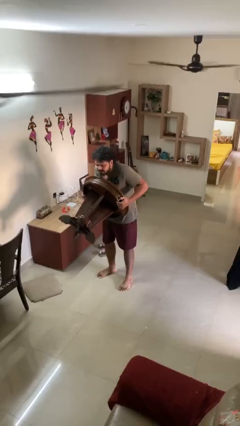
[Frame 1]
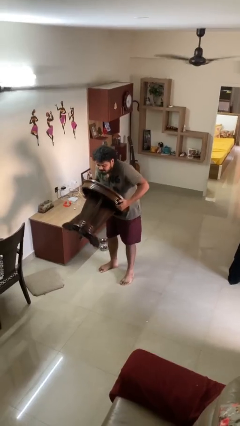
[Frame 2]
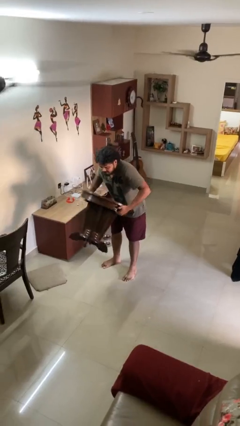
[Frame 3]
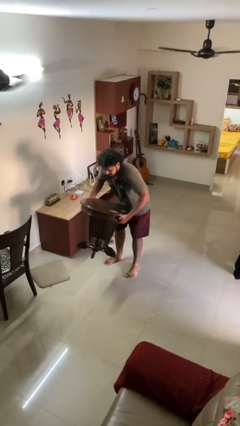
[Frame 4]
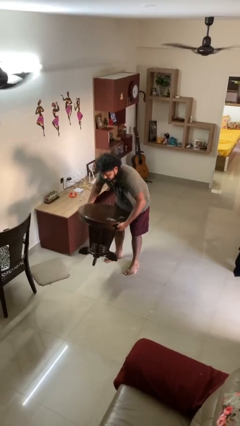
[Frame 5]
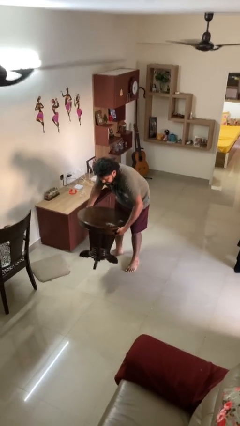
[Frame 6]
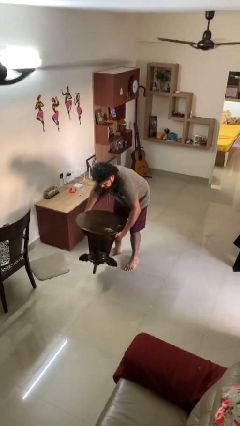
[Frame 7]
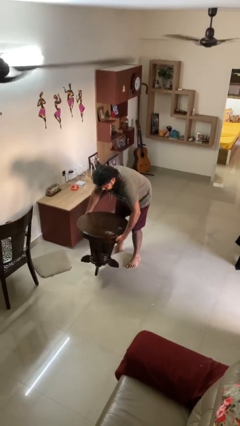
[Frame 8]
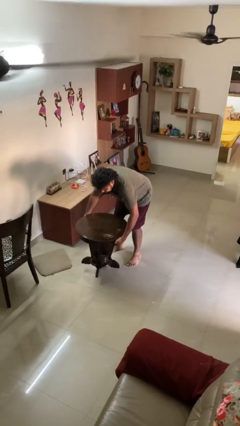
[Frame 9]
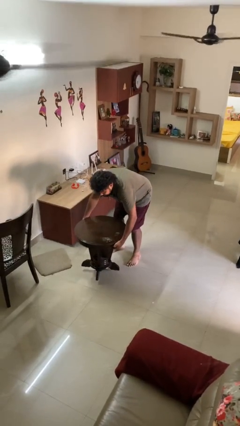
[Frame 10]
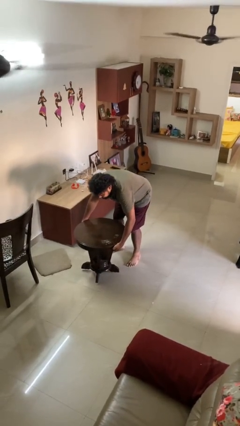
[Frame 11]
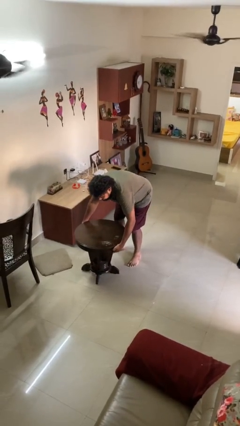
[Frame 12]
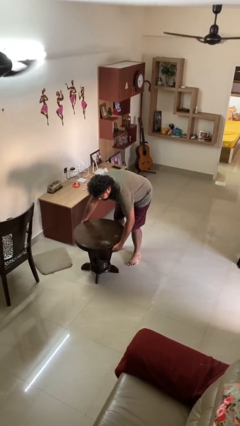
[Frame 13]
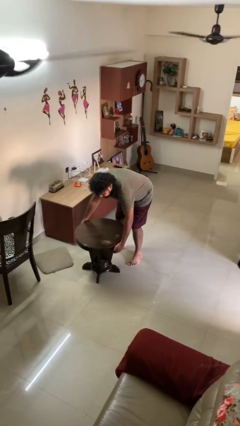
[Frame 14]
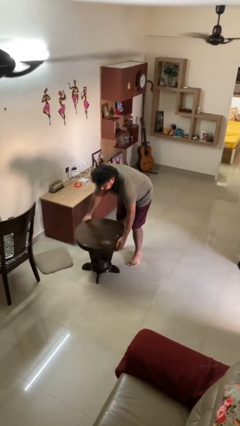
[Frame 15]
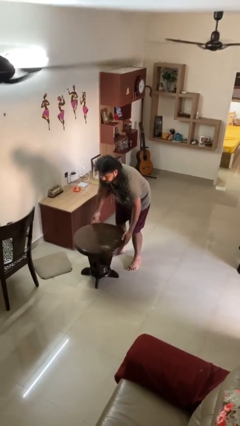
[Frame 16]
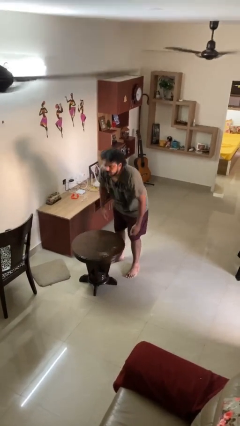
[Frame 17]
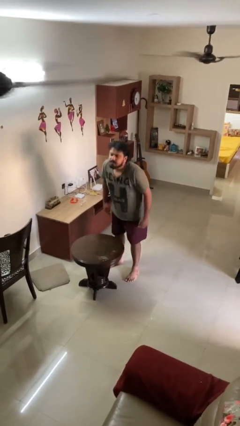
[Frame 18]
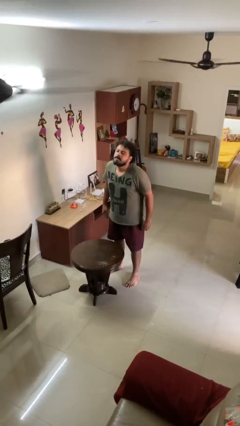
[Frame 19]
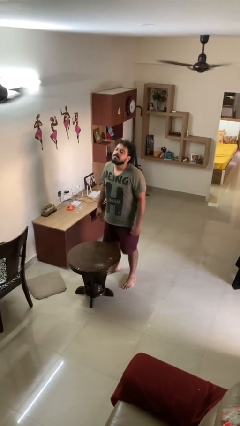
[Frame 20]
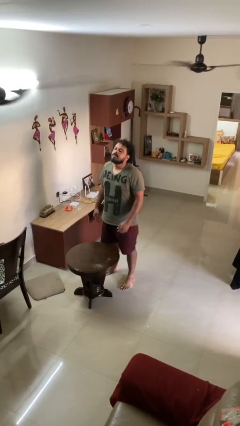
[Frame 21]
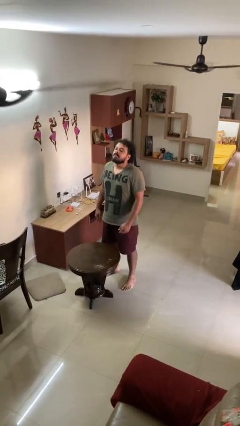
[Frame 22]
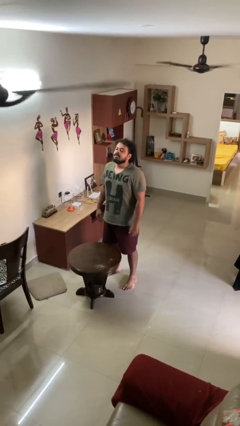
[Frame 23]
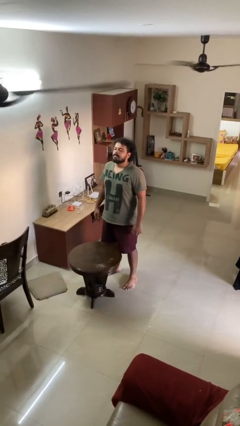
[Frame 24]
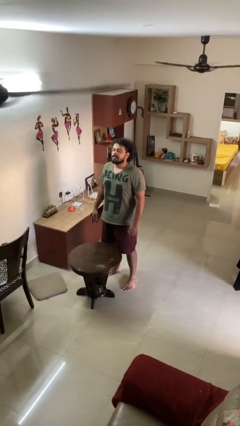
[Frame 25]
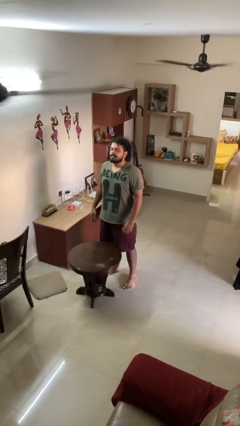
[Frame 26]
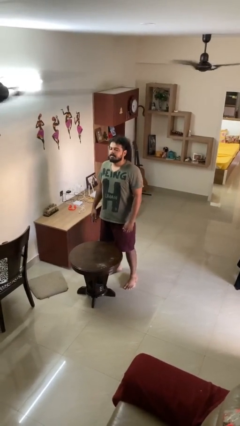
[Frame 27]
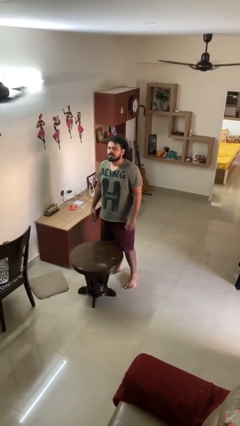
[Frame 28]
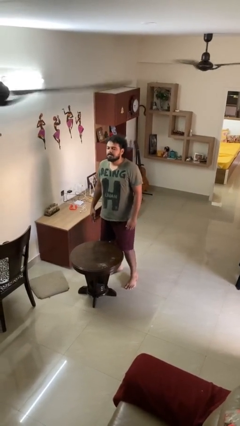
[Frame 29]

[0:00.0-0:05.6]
person puts down object on floor

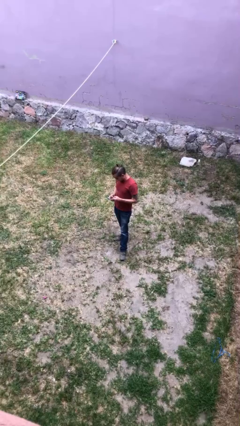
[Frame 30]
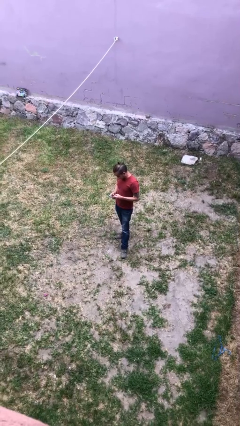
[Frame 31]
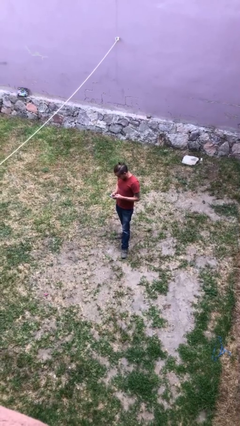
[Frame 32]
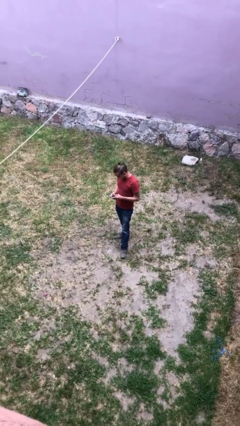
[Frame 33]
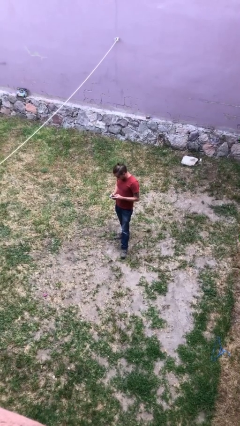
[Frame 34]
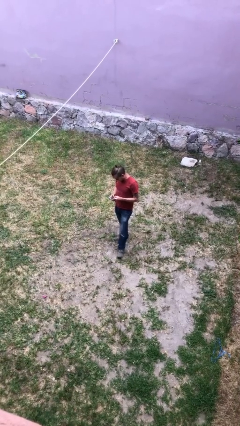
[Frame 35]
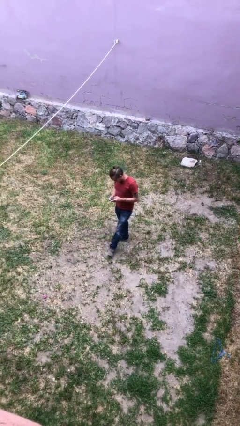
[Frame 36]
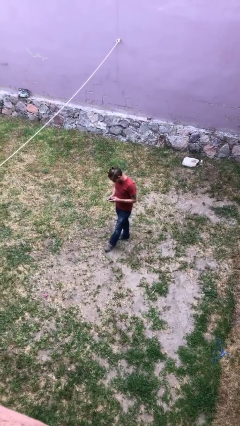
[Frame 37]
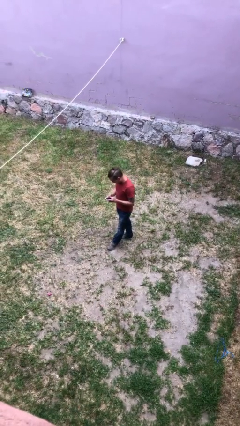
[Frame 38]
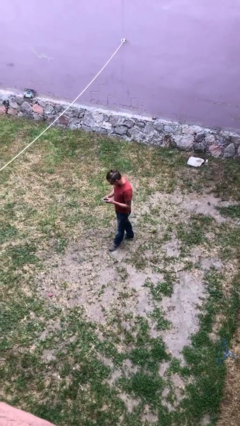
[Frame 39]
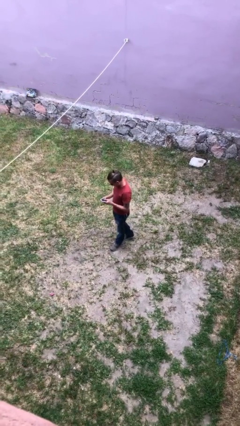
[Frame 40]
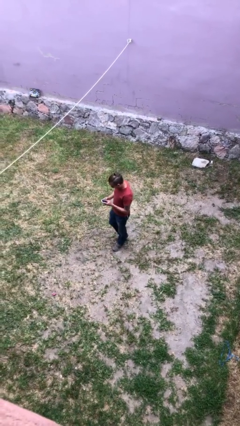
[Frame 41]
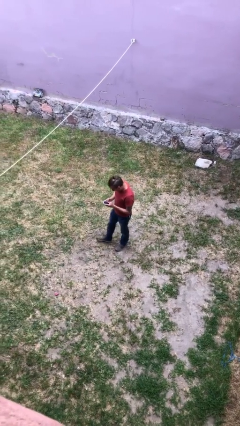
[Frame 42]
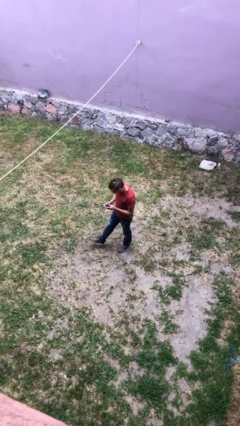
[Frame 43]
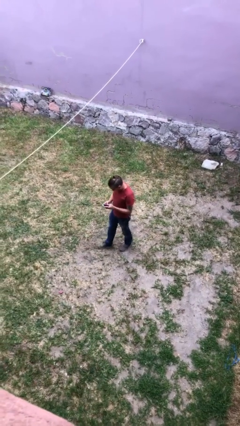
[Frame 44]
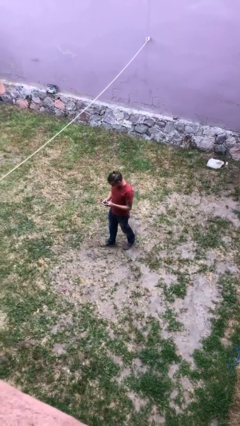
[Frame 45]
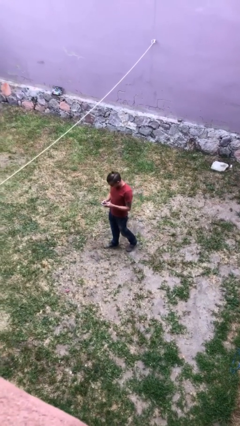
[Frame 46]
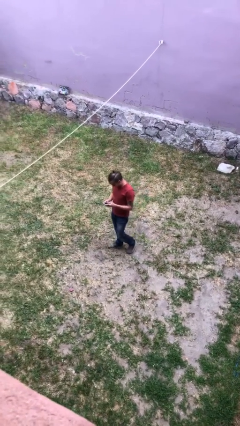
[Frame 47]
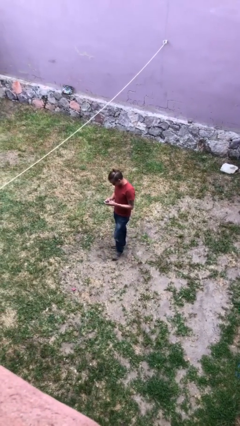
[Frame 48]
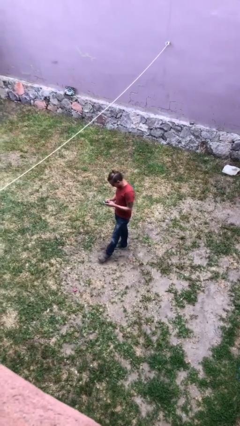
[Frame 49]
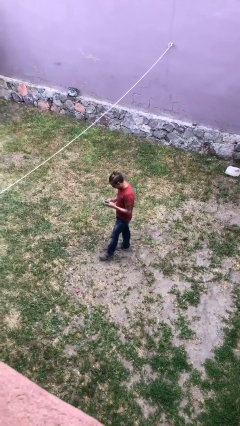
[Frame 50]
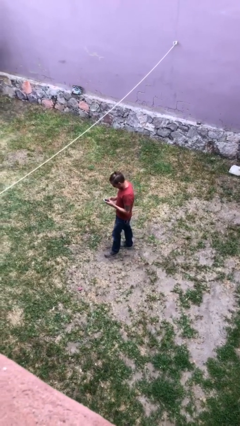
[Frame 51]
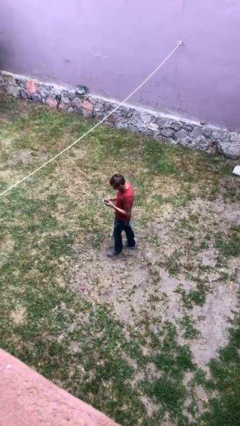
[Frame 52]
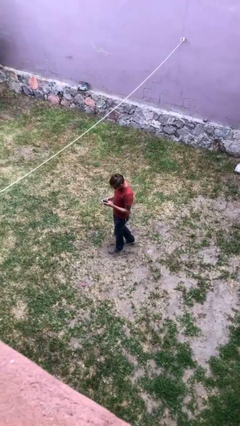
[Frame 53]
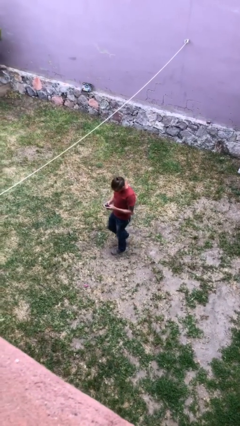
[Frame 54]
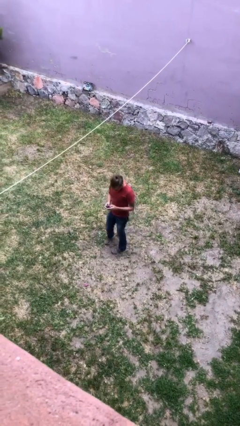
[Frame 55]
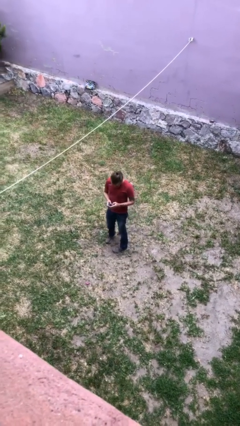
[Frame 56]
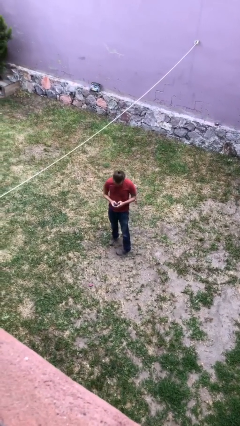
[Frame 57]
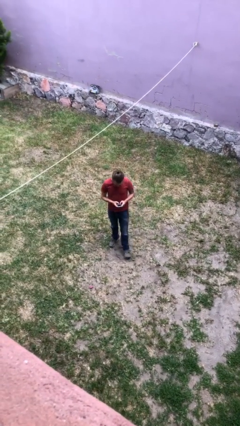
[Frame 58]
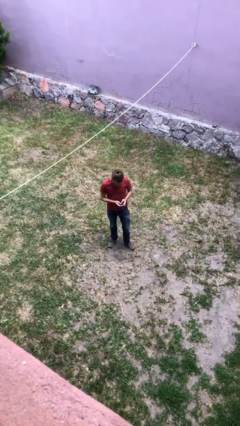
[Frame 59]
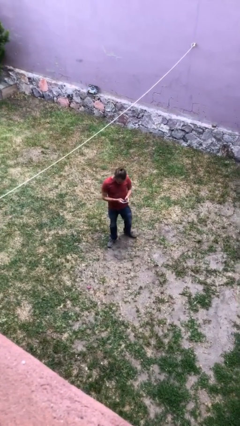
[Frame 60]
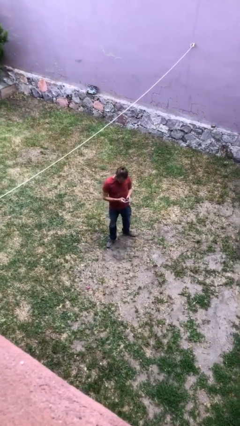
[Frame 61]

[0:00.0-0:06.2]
person texts on phone

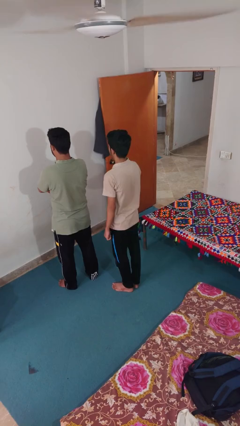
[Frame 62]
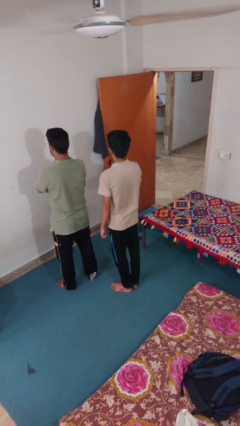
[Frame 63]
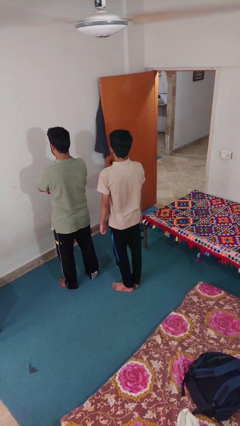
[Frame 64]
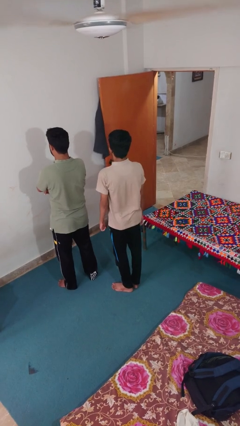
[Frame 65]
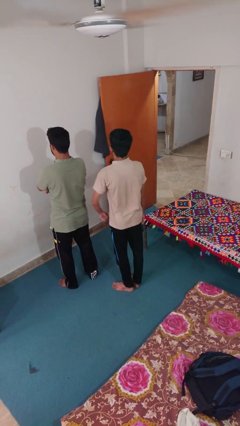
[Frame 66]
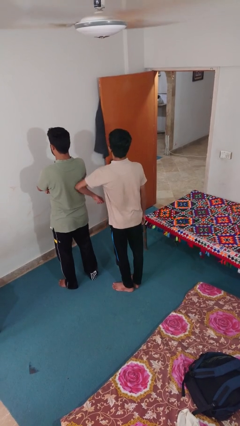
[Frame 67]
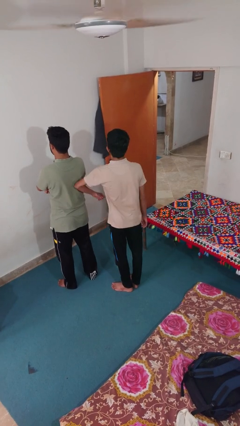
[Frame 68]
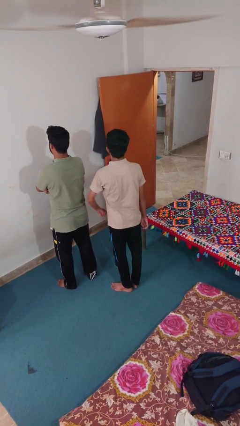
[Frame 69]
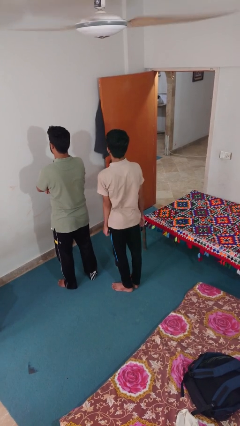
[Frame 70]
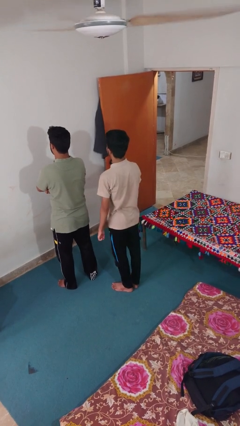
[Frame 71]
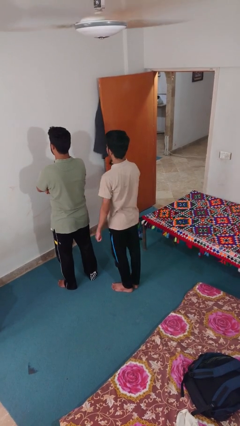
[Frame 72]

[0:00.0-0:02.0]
person nudges person with elbow

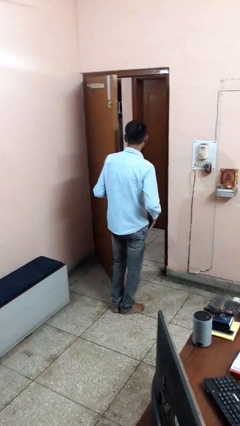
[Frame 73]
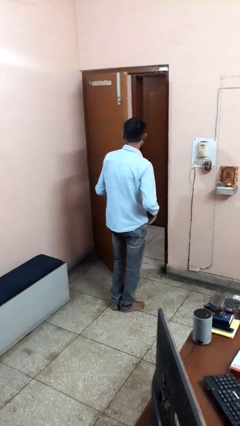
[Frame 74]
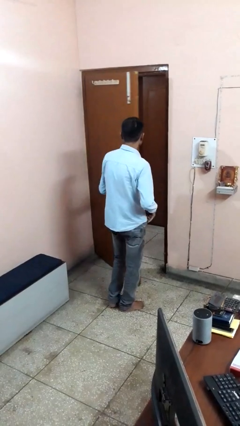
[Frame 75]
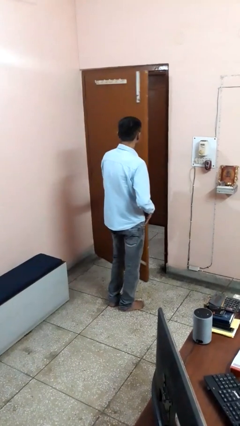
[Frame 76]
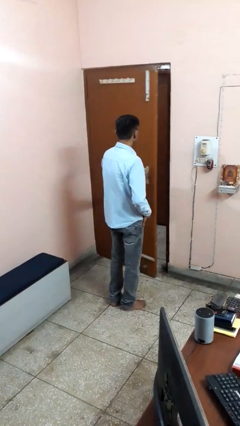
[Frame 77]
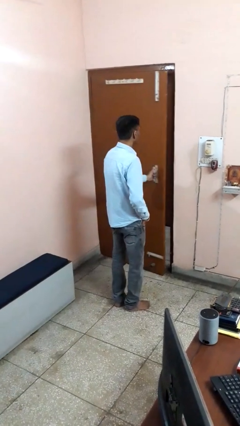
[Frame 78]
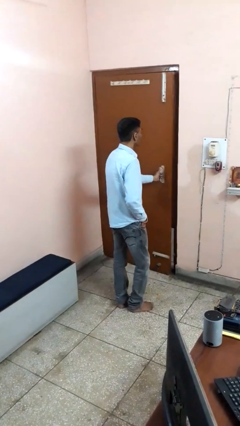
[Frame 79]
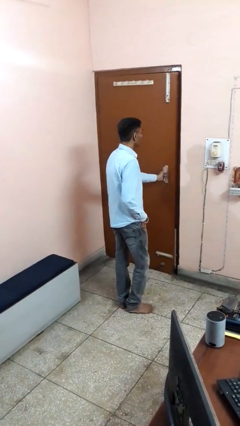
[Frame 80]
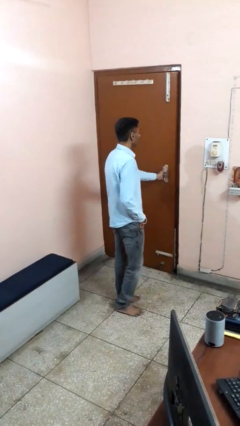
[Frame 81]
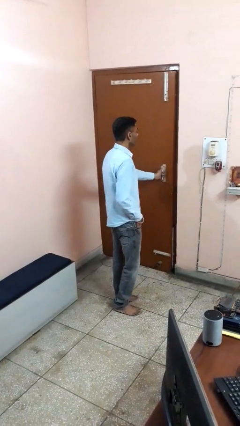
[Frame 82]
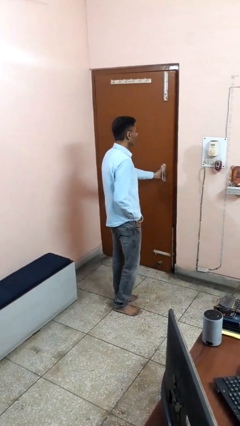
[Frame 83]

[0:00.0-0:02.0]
person closes facility door

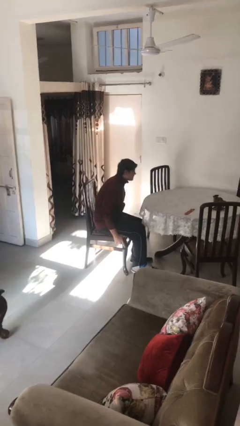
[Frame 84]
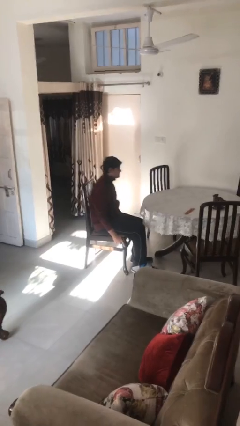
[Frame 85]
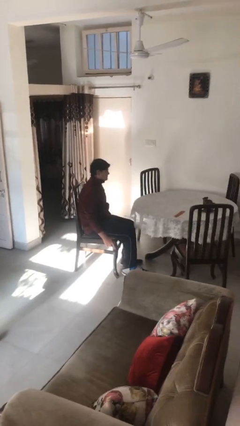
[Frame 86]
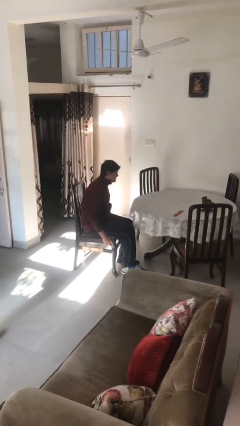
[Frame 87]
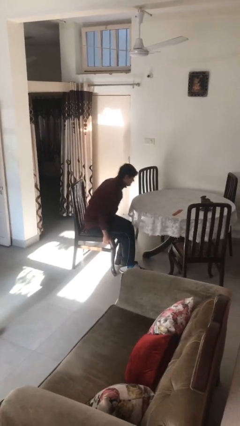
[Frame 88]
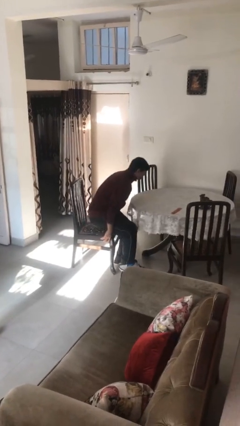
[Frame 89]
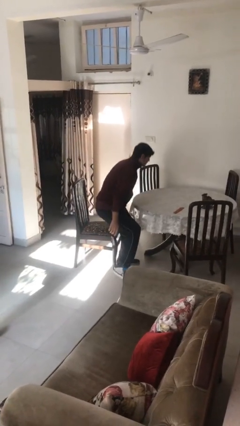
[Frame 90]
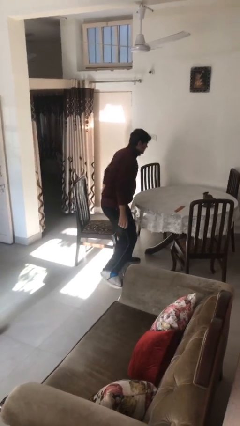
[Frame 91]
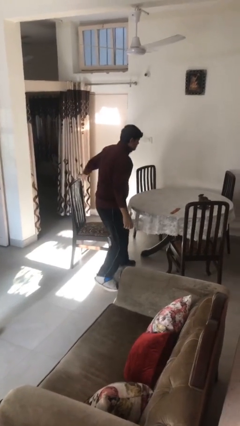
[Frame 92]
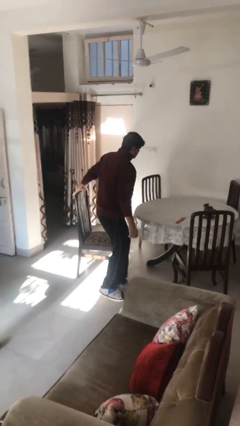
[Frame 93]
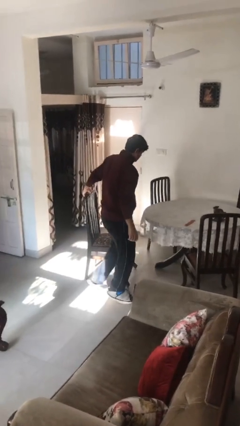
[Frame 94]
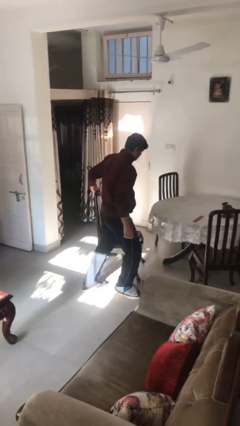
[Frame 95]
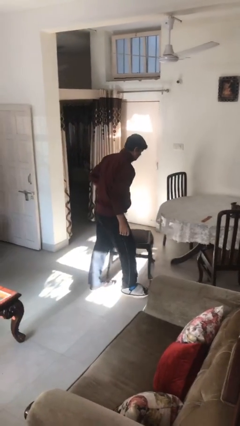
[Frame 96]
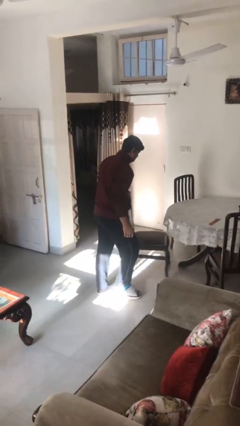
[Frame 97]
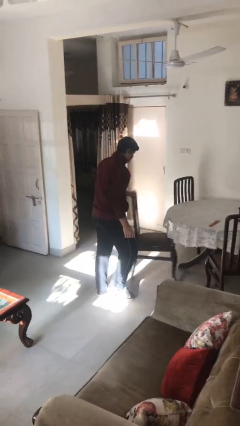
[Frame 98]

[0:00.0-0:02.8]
person stands up
